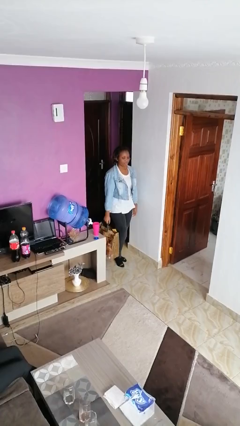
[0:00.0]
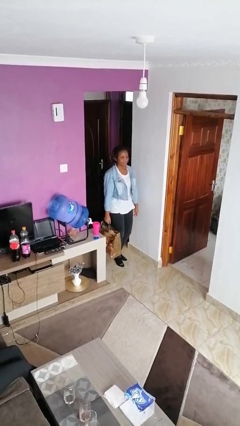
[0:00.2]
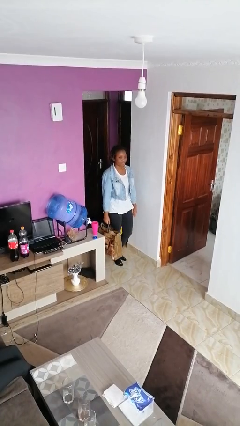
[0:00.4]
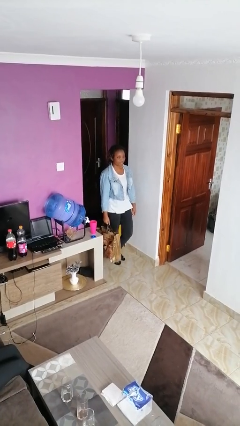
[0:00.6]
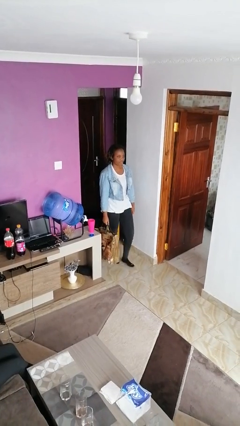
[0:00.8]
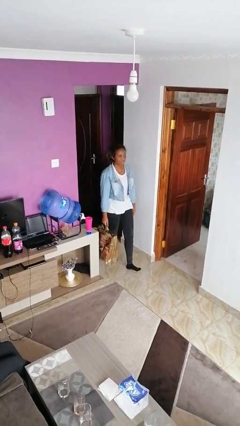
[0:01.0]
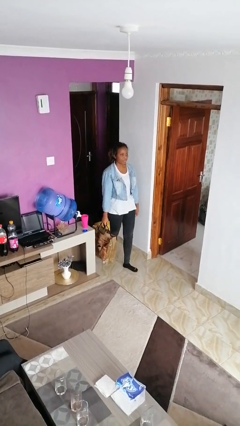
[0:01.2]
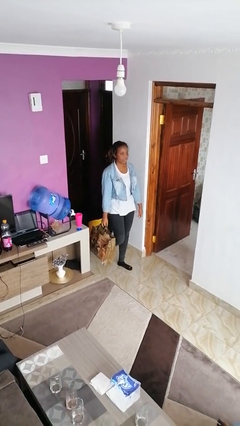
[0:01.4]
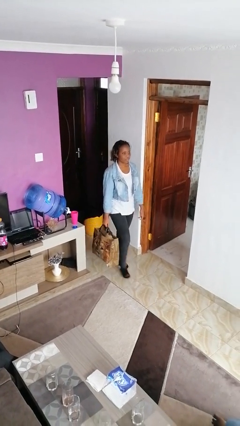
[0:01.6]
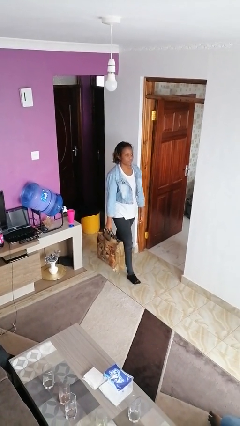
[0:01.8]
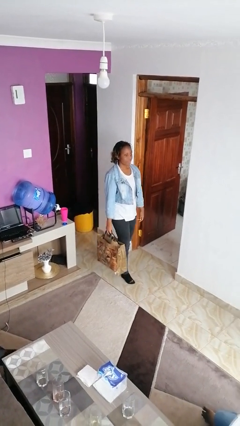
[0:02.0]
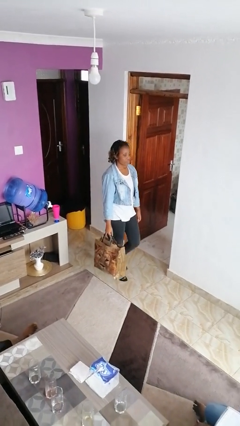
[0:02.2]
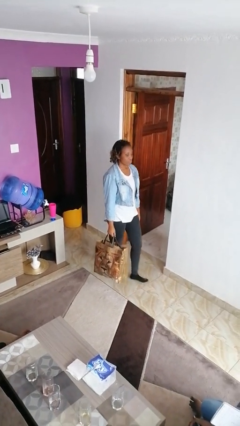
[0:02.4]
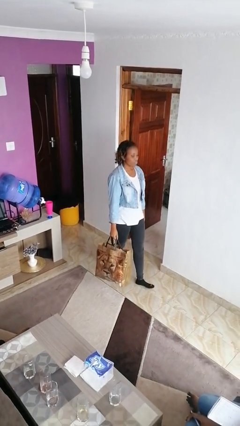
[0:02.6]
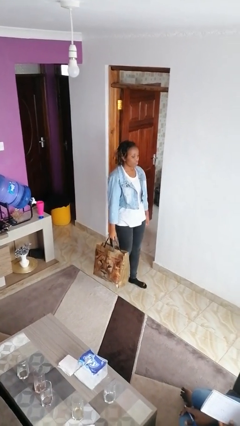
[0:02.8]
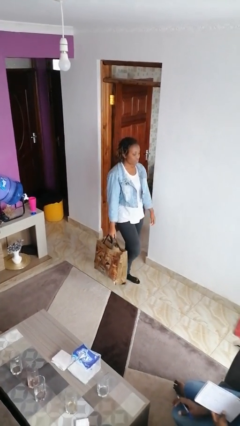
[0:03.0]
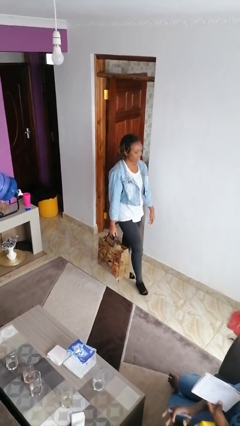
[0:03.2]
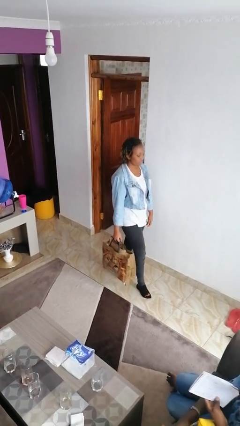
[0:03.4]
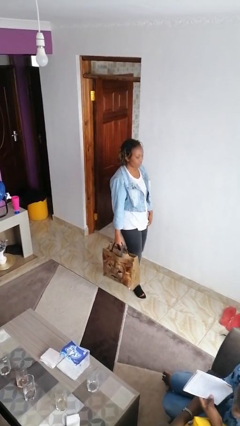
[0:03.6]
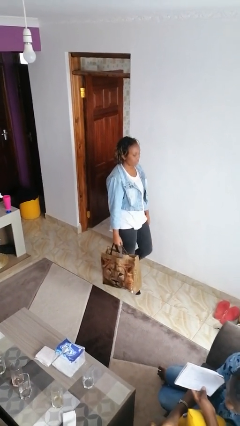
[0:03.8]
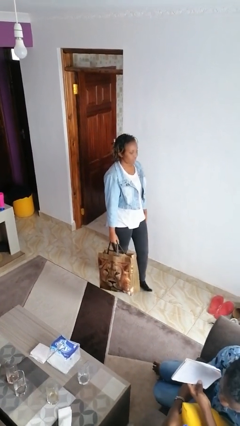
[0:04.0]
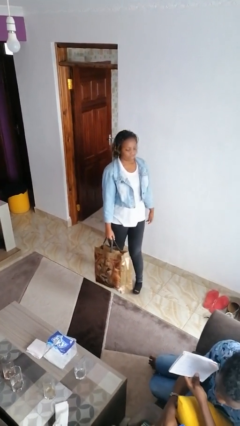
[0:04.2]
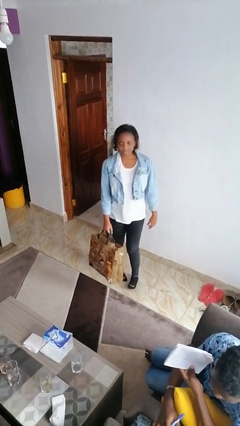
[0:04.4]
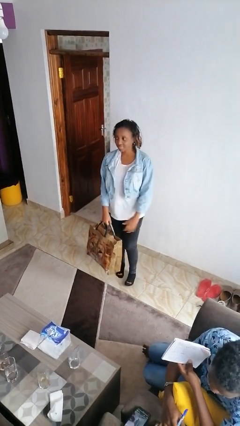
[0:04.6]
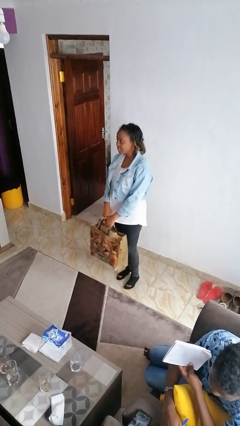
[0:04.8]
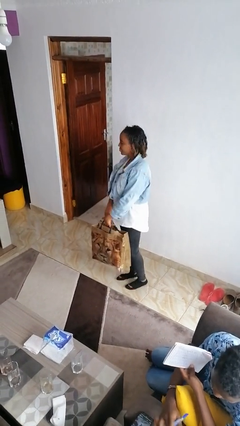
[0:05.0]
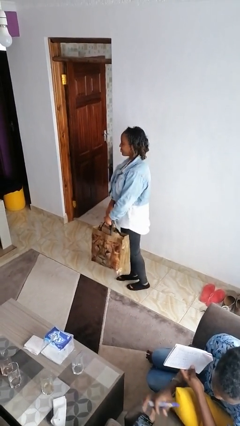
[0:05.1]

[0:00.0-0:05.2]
person carries groceries

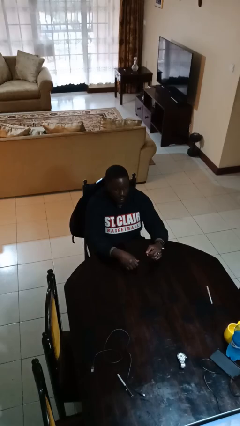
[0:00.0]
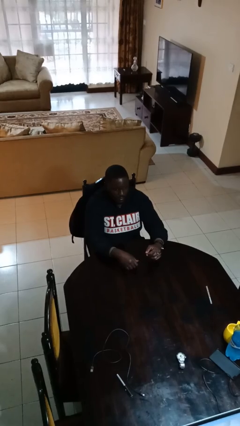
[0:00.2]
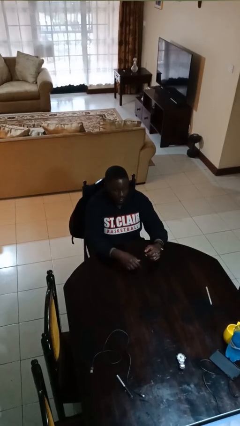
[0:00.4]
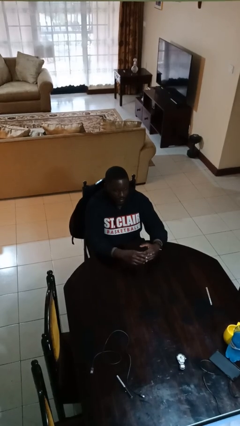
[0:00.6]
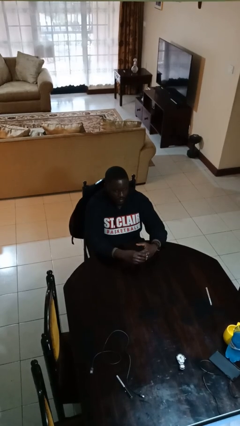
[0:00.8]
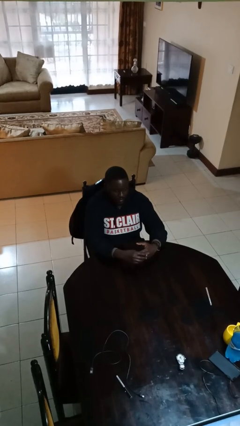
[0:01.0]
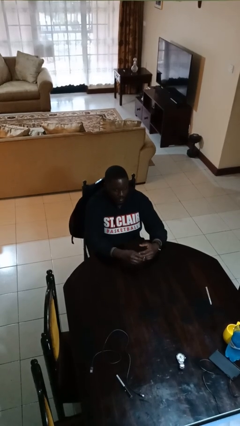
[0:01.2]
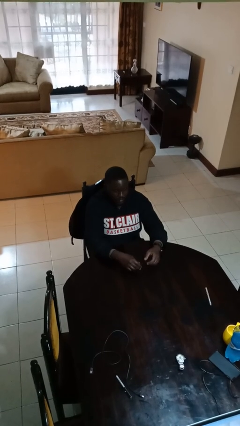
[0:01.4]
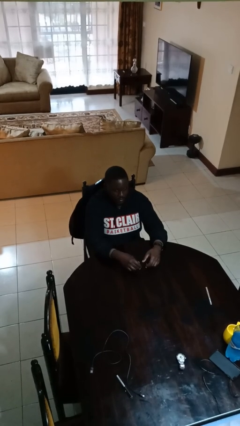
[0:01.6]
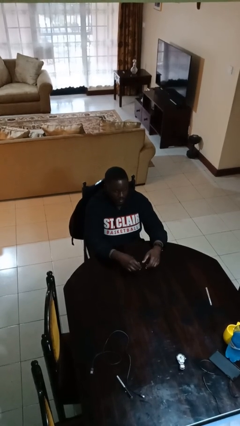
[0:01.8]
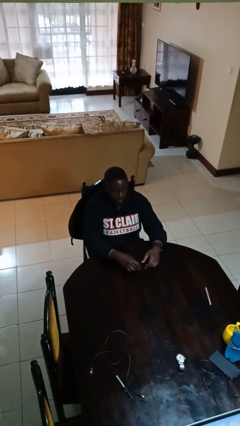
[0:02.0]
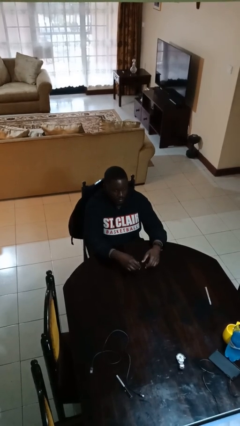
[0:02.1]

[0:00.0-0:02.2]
person takes off ring

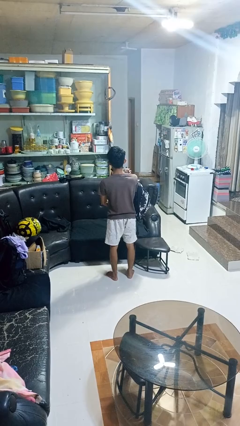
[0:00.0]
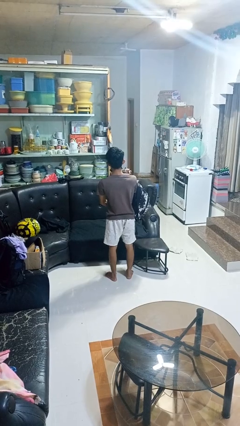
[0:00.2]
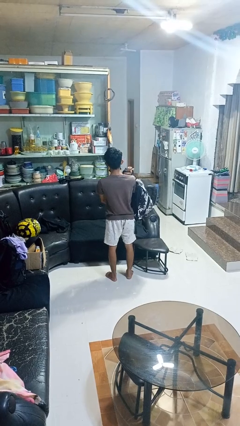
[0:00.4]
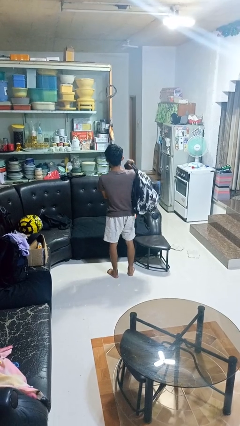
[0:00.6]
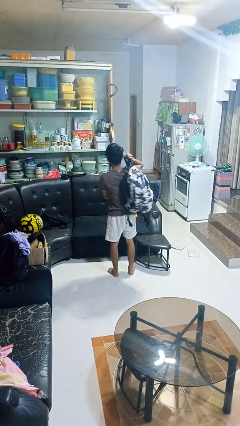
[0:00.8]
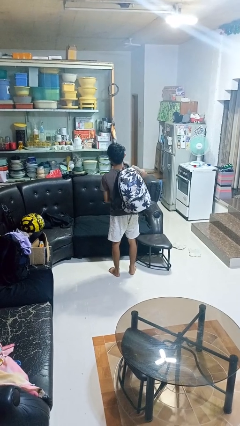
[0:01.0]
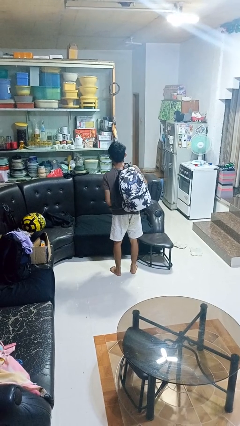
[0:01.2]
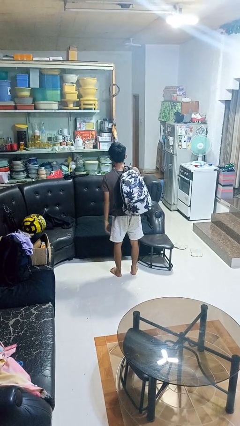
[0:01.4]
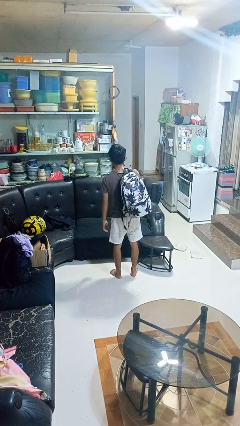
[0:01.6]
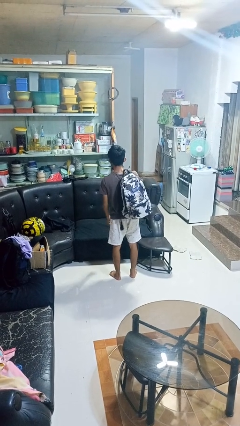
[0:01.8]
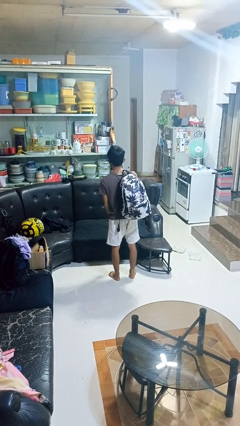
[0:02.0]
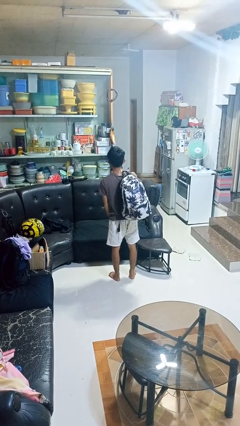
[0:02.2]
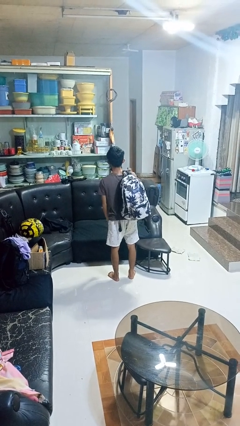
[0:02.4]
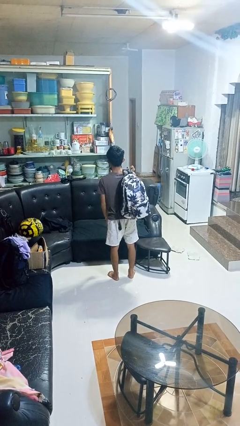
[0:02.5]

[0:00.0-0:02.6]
person puts on backpack

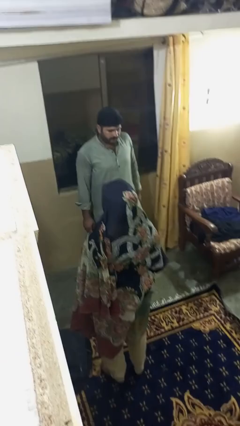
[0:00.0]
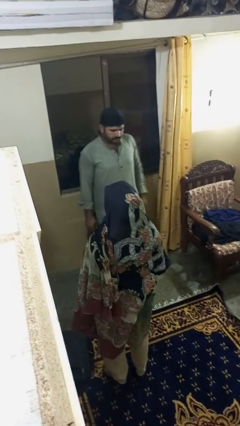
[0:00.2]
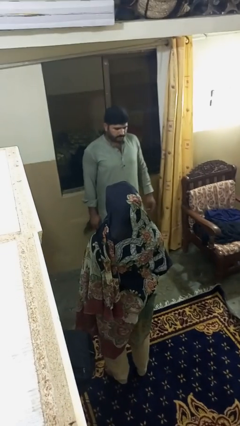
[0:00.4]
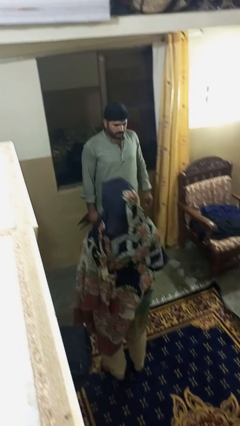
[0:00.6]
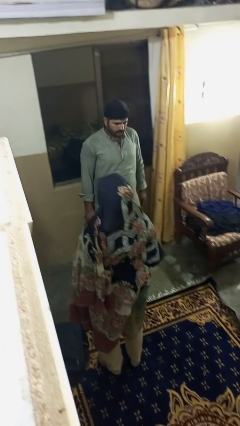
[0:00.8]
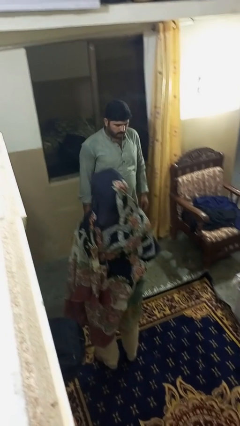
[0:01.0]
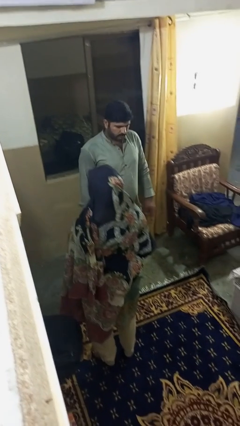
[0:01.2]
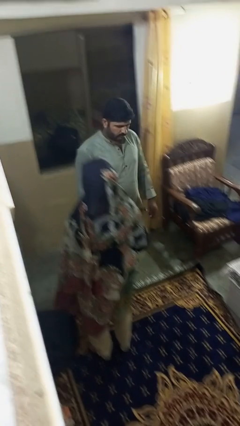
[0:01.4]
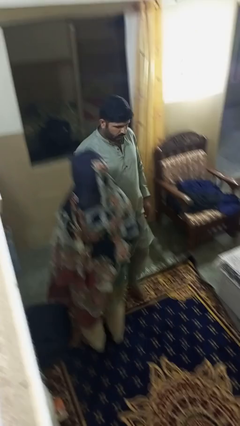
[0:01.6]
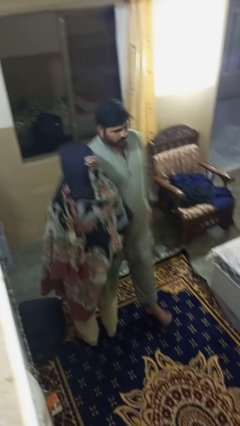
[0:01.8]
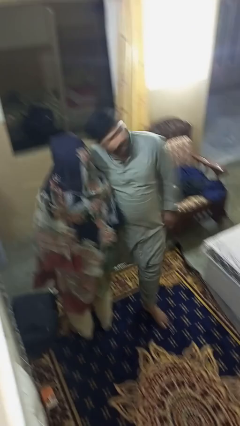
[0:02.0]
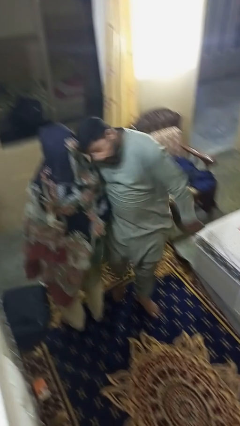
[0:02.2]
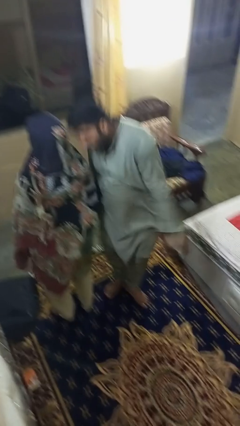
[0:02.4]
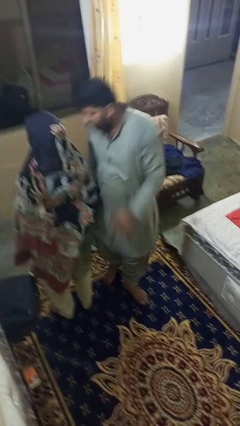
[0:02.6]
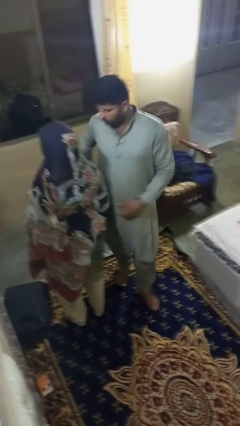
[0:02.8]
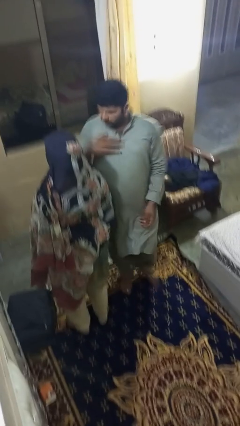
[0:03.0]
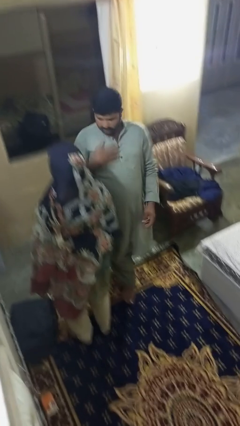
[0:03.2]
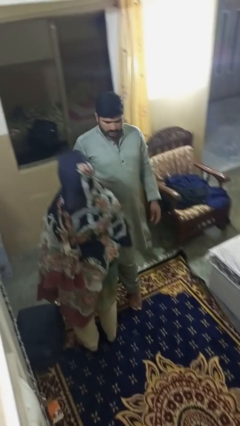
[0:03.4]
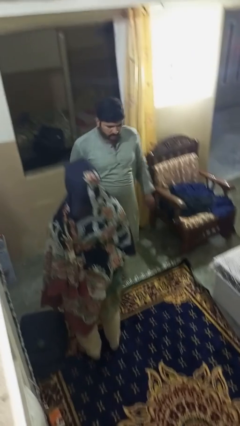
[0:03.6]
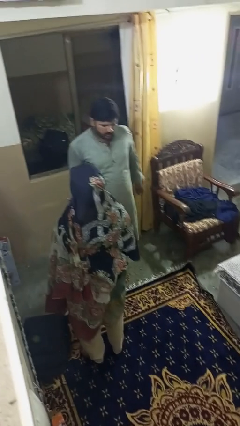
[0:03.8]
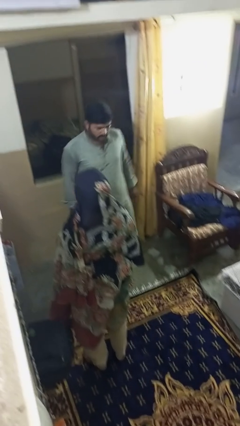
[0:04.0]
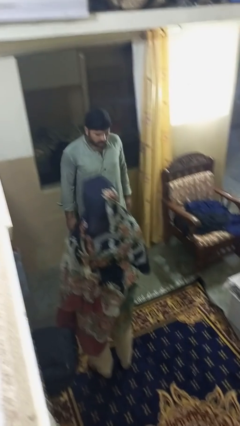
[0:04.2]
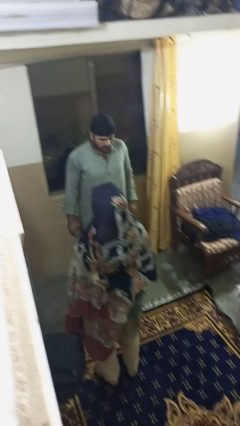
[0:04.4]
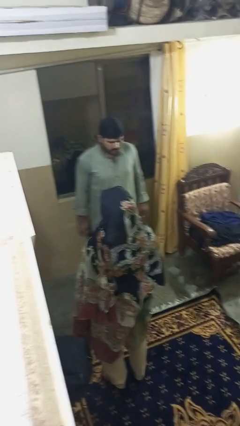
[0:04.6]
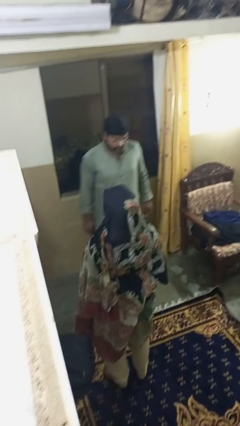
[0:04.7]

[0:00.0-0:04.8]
person bumps into person

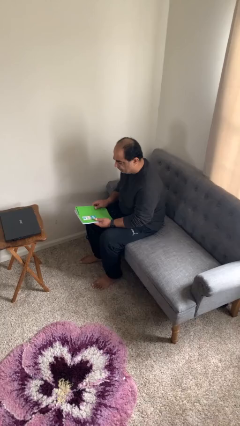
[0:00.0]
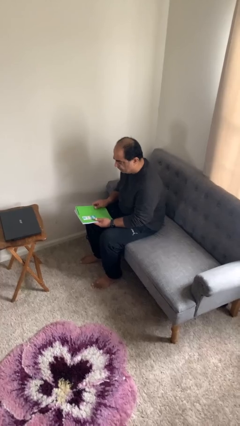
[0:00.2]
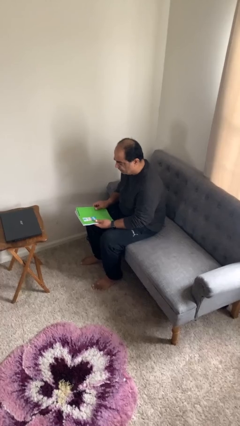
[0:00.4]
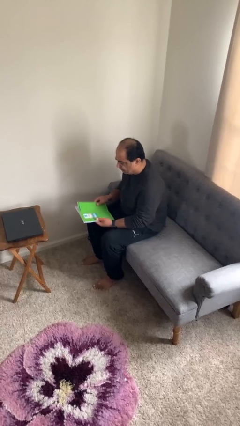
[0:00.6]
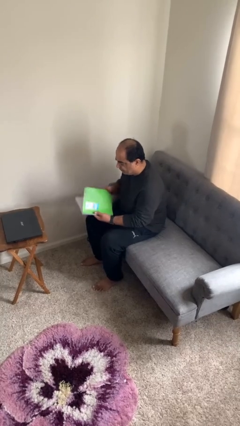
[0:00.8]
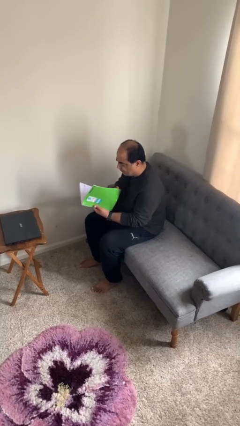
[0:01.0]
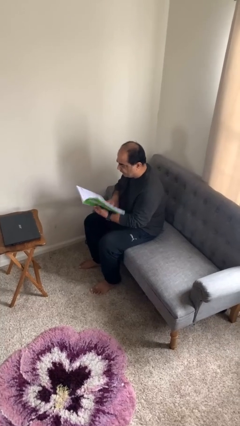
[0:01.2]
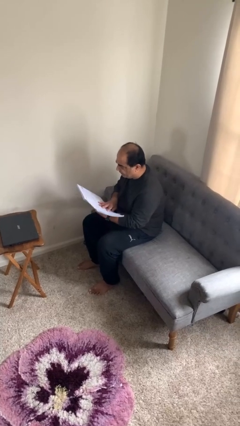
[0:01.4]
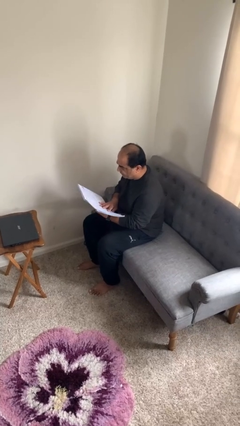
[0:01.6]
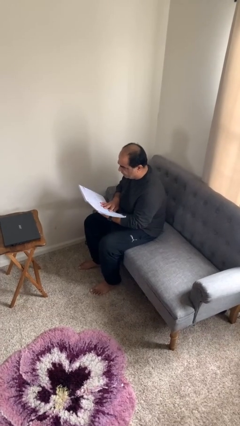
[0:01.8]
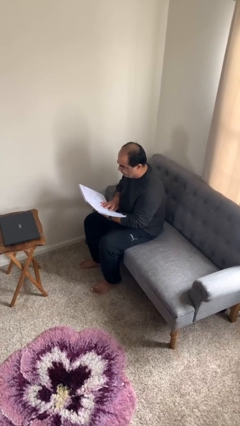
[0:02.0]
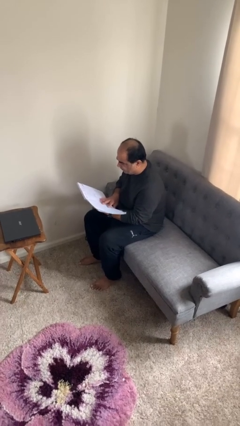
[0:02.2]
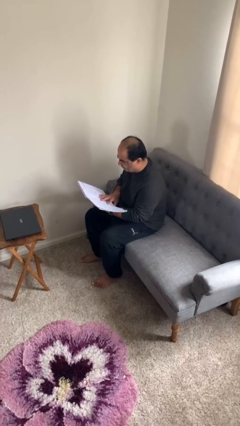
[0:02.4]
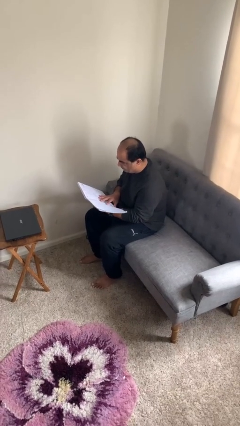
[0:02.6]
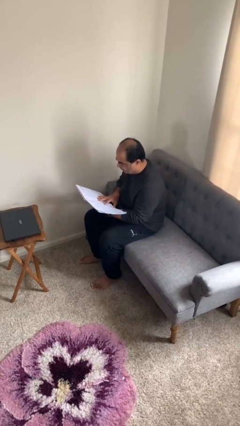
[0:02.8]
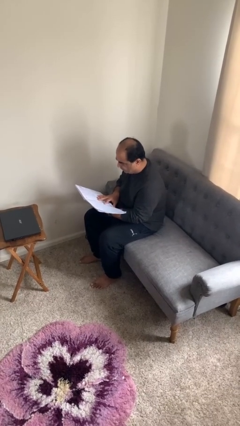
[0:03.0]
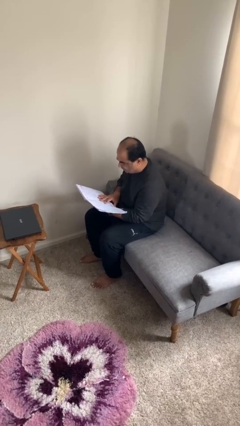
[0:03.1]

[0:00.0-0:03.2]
person reads document
